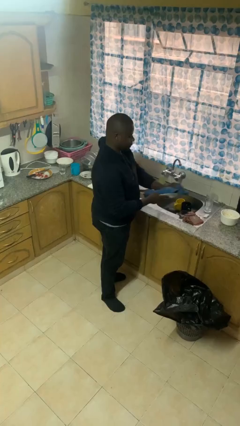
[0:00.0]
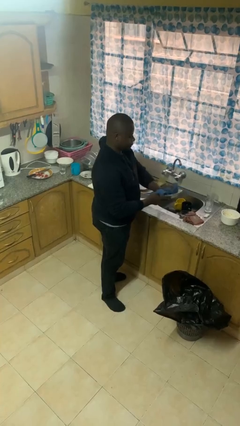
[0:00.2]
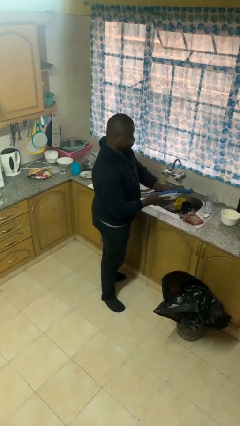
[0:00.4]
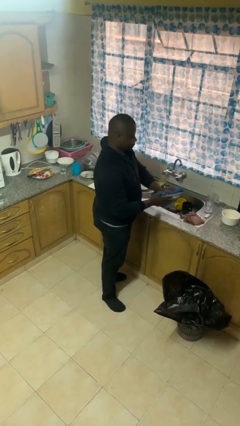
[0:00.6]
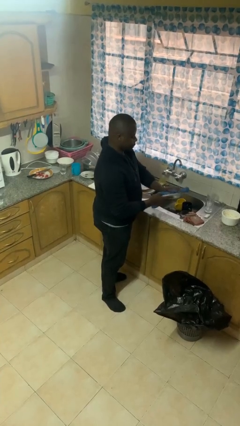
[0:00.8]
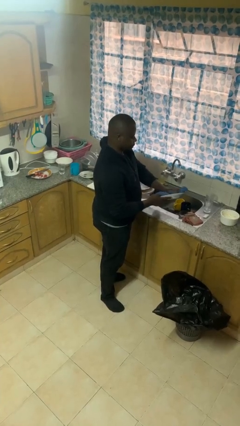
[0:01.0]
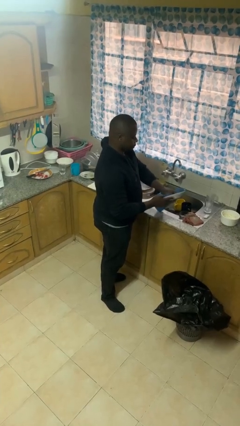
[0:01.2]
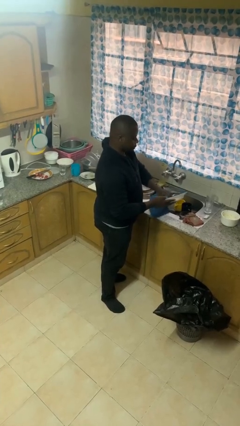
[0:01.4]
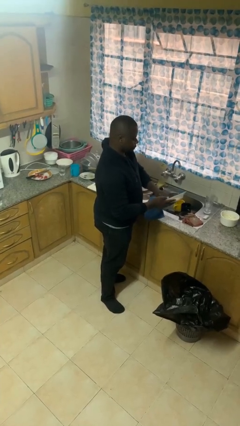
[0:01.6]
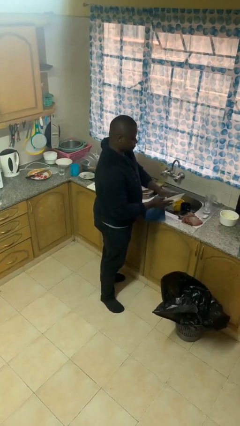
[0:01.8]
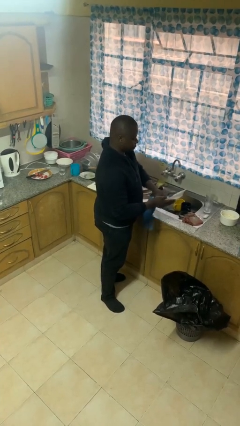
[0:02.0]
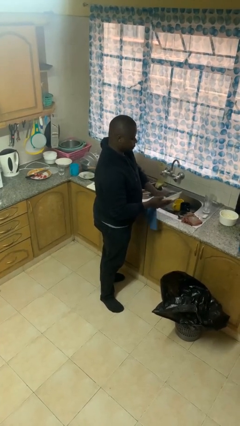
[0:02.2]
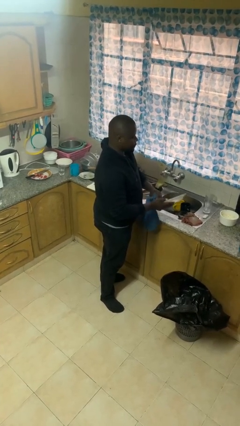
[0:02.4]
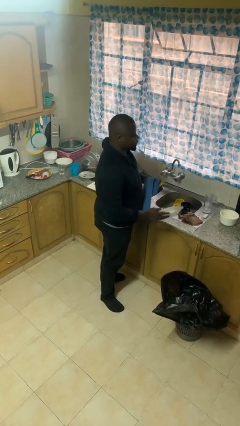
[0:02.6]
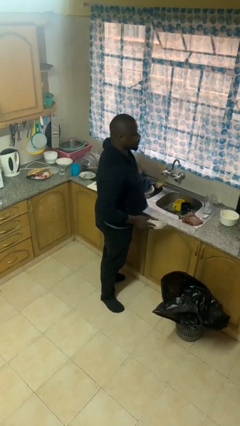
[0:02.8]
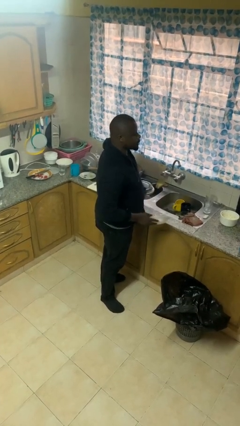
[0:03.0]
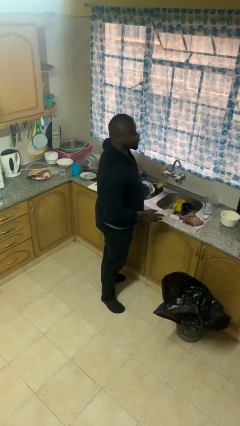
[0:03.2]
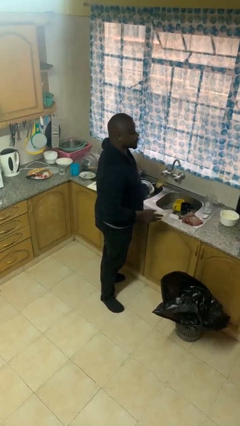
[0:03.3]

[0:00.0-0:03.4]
person dries dish

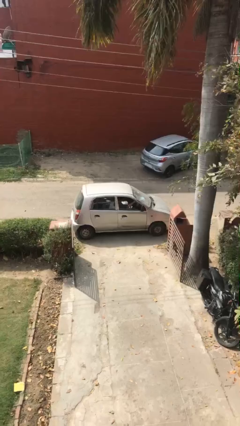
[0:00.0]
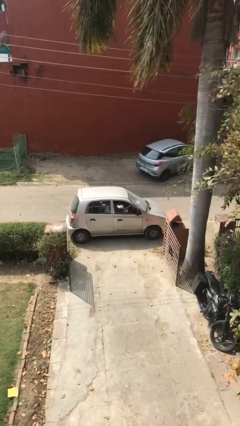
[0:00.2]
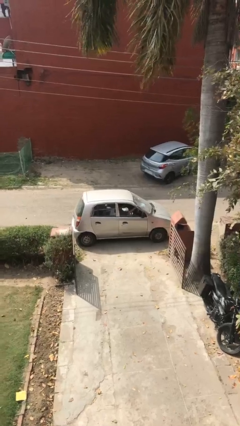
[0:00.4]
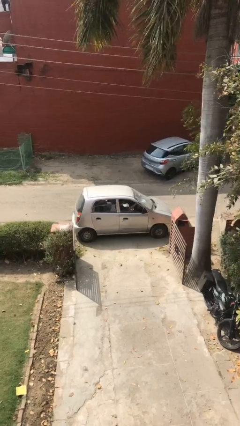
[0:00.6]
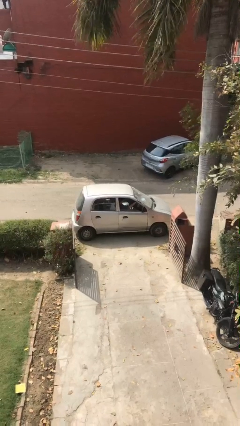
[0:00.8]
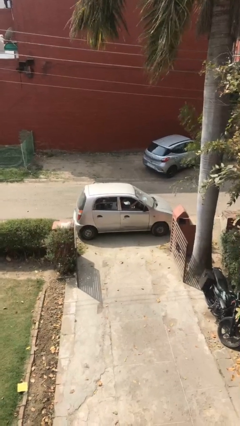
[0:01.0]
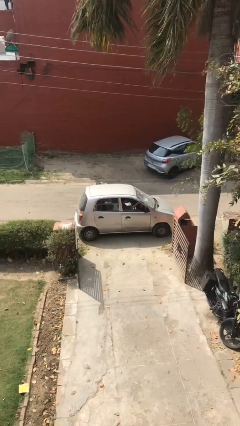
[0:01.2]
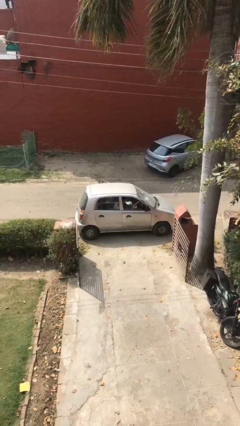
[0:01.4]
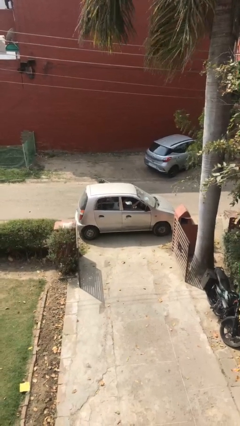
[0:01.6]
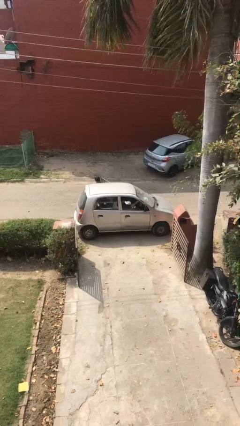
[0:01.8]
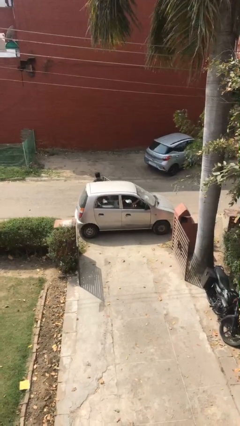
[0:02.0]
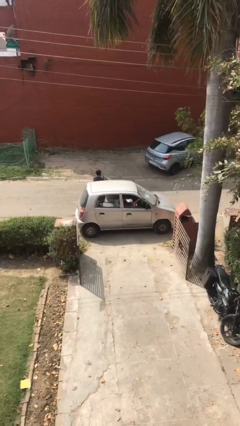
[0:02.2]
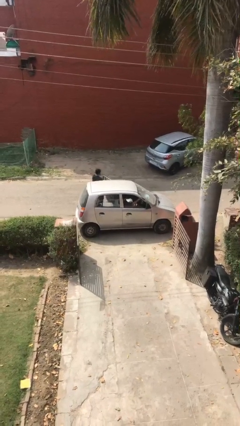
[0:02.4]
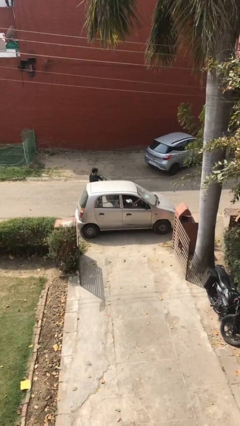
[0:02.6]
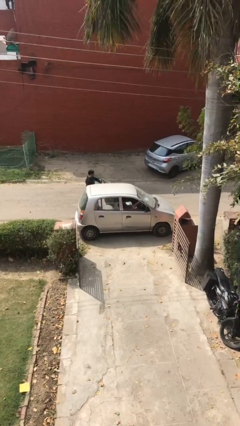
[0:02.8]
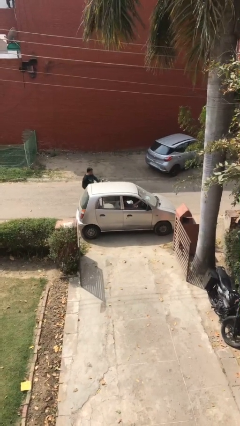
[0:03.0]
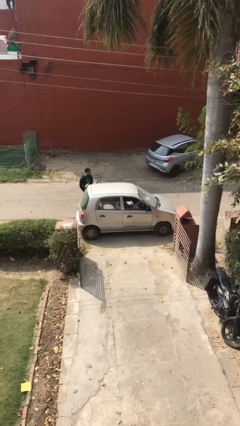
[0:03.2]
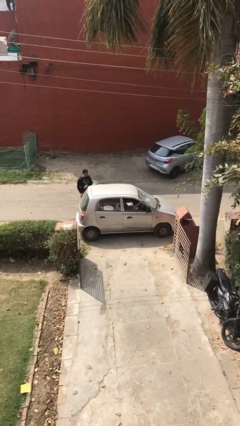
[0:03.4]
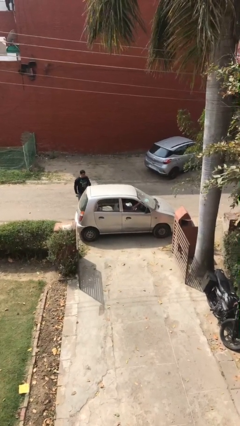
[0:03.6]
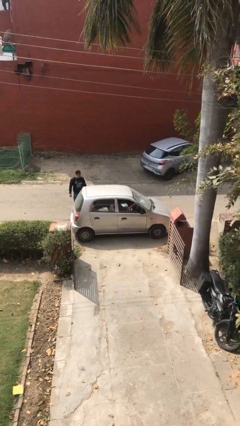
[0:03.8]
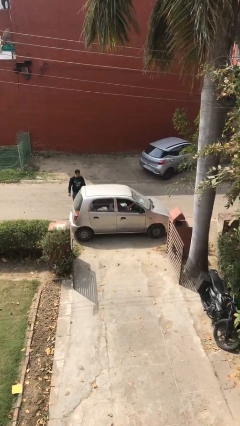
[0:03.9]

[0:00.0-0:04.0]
car drops off person

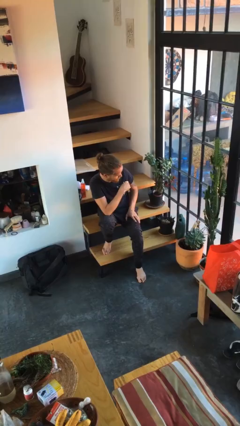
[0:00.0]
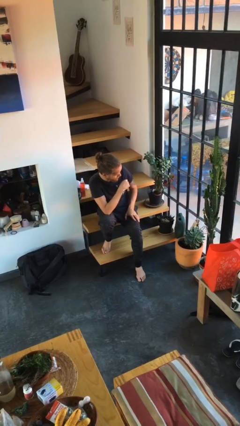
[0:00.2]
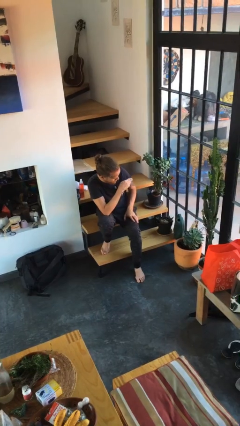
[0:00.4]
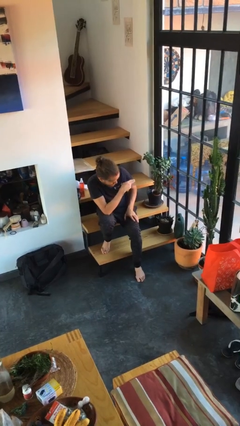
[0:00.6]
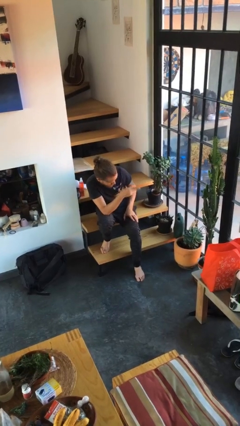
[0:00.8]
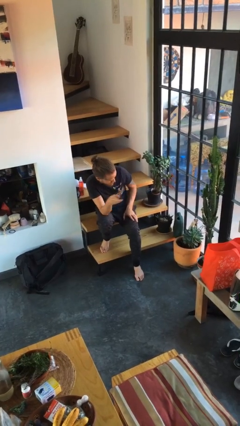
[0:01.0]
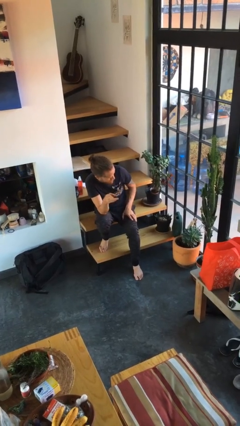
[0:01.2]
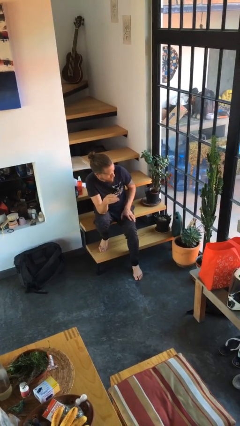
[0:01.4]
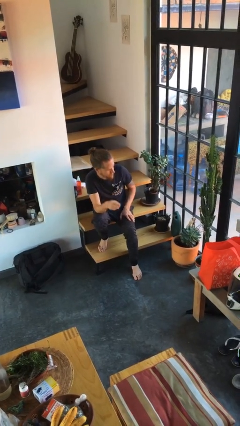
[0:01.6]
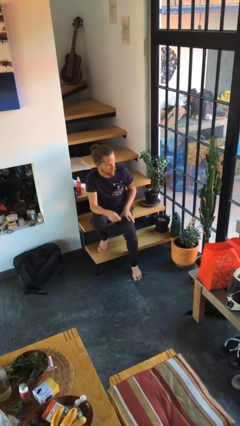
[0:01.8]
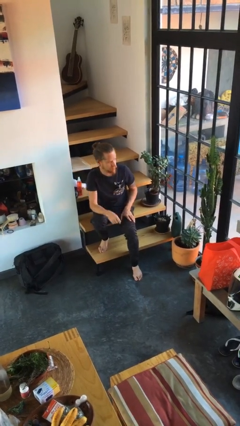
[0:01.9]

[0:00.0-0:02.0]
person gestures swipe right

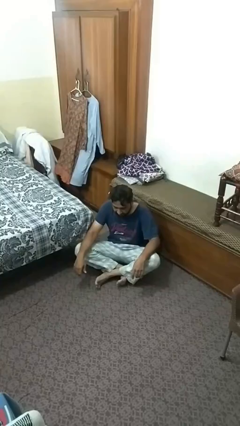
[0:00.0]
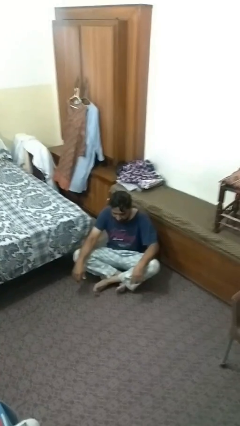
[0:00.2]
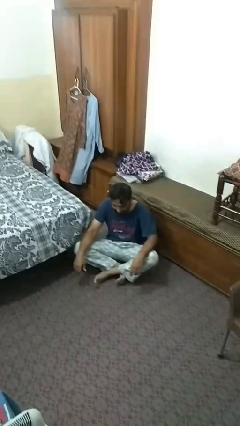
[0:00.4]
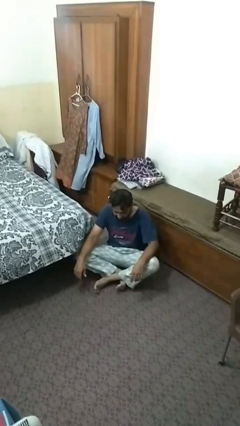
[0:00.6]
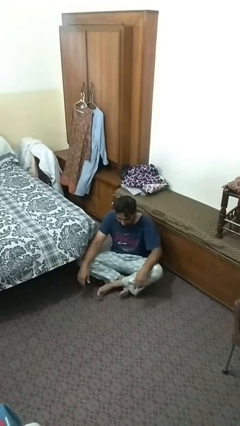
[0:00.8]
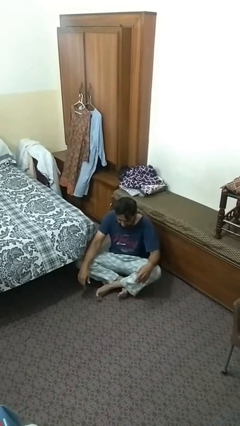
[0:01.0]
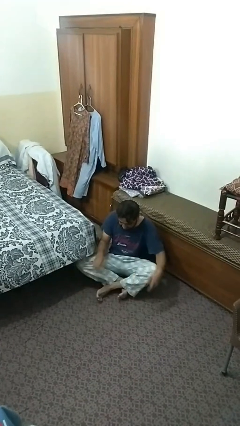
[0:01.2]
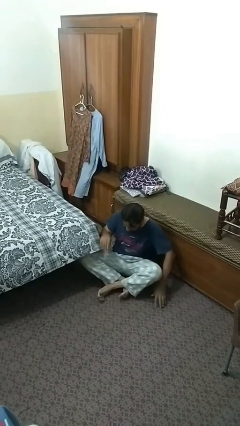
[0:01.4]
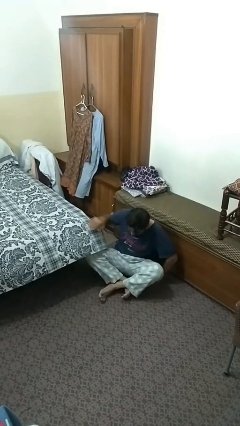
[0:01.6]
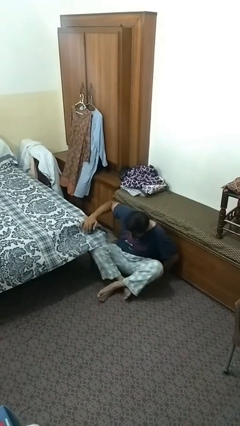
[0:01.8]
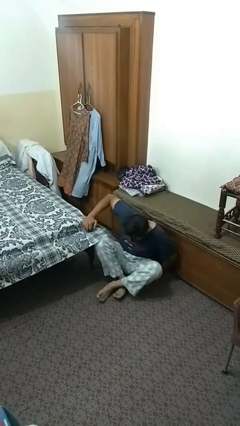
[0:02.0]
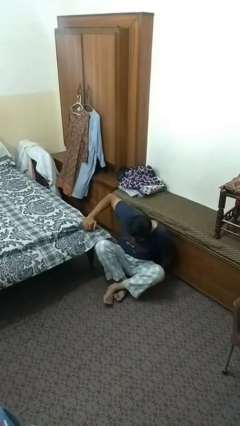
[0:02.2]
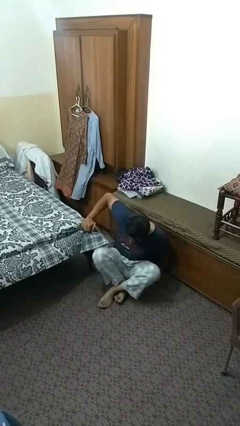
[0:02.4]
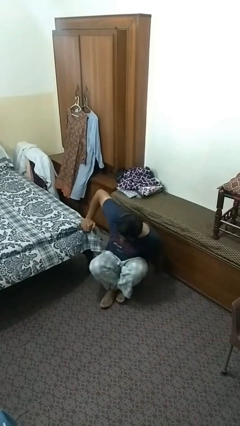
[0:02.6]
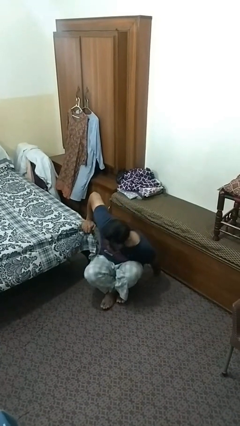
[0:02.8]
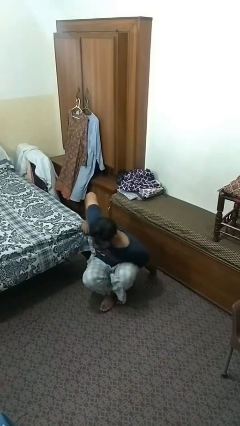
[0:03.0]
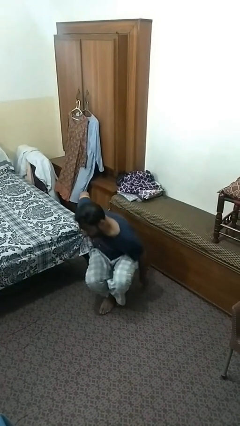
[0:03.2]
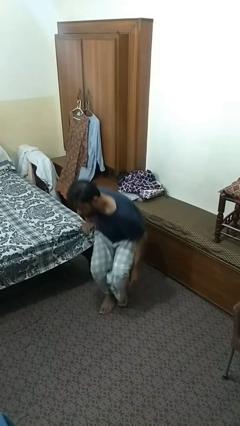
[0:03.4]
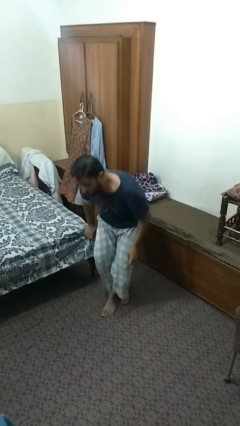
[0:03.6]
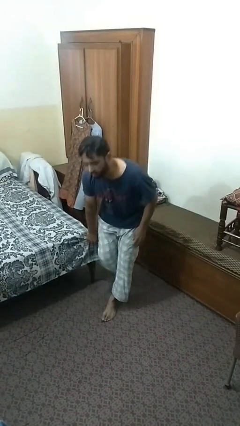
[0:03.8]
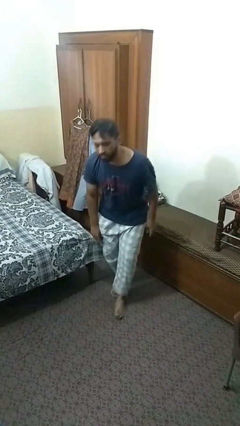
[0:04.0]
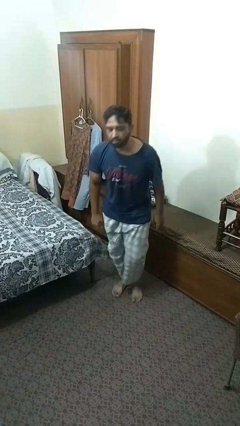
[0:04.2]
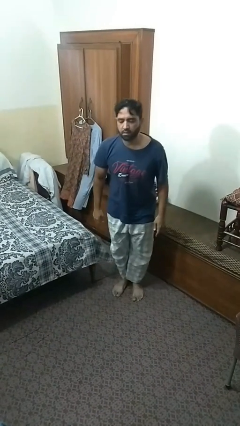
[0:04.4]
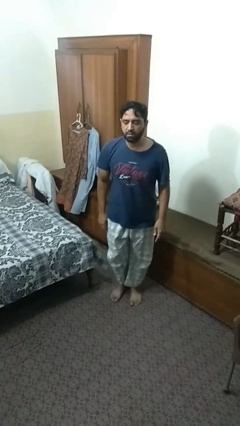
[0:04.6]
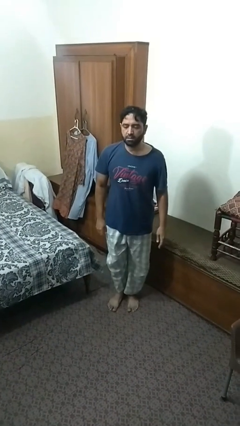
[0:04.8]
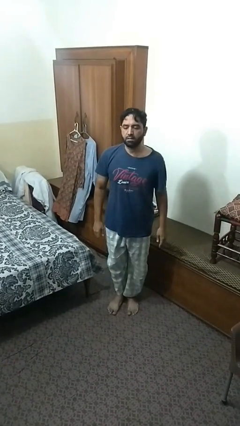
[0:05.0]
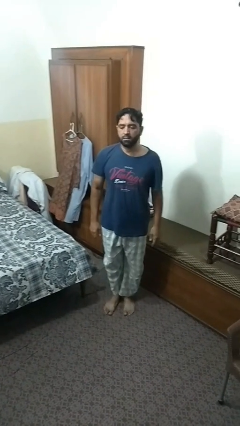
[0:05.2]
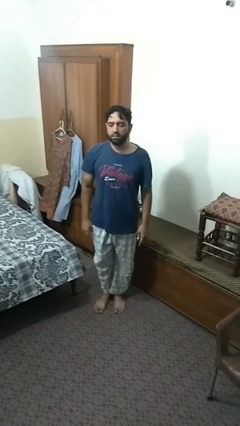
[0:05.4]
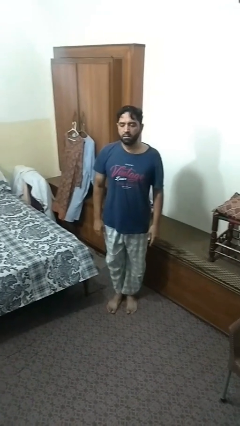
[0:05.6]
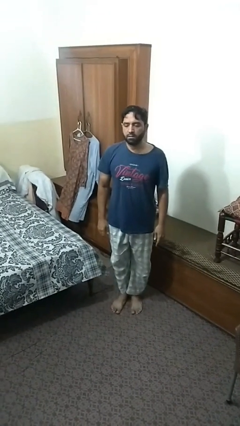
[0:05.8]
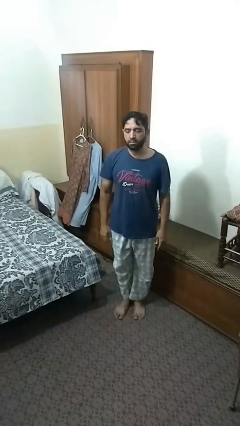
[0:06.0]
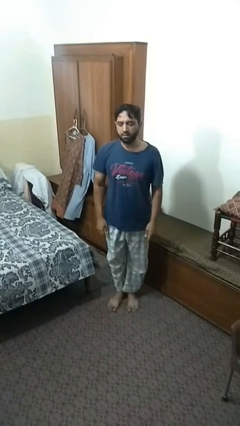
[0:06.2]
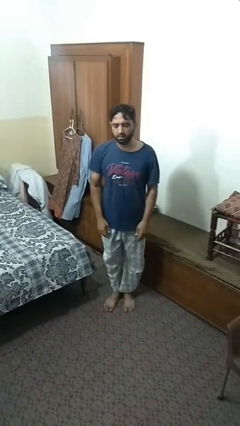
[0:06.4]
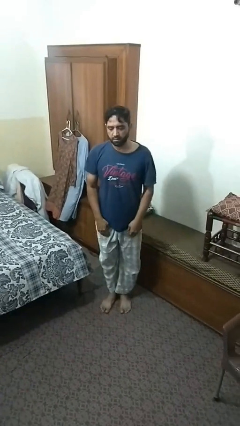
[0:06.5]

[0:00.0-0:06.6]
person stands up from floor

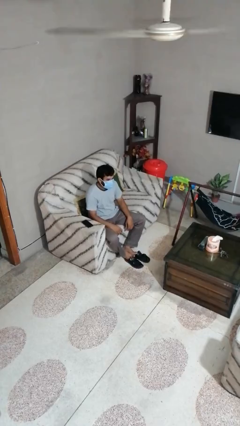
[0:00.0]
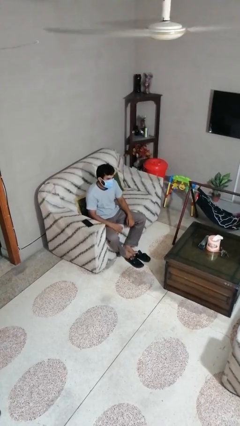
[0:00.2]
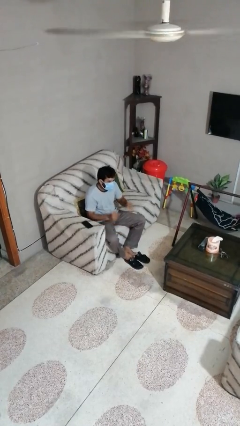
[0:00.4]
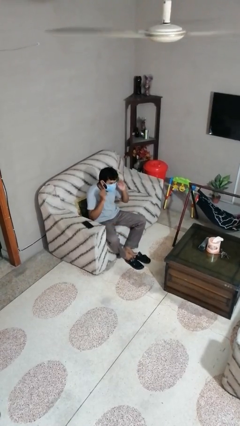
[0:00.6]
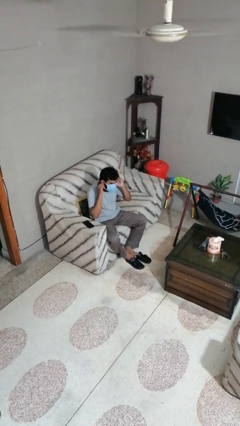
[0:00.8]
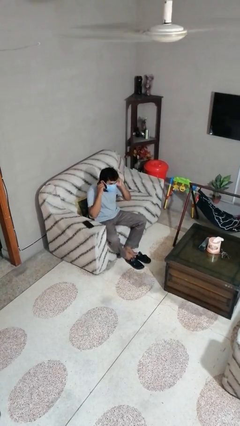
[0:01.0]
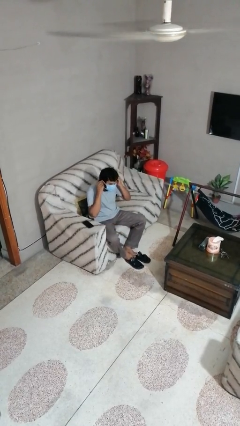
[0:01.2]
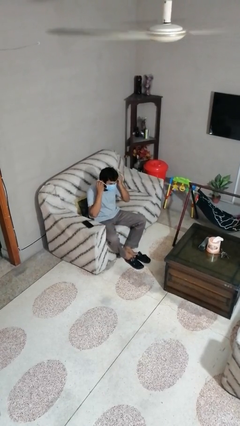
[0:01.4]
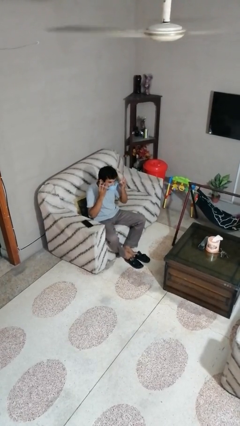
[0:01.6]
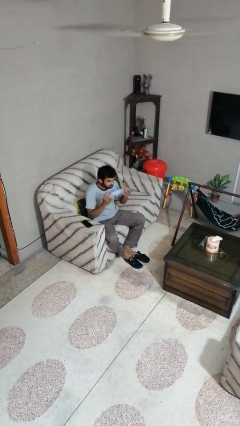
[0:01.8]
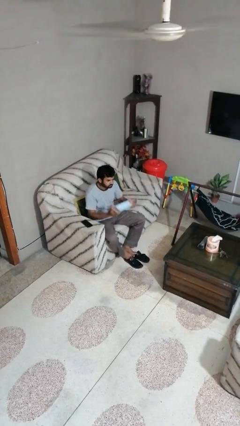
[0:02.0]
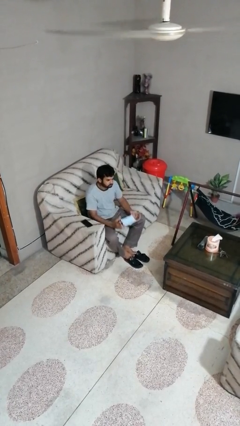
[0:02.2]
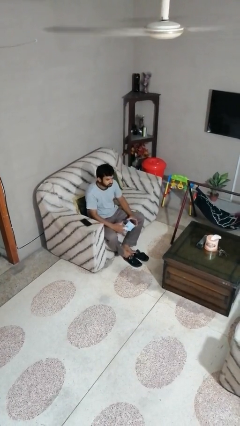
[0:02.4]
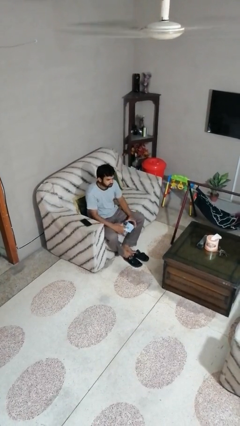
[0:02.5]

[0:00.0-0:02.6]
person takes off facemask
